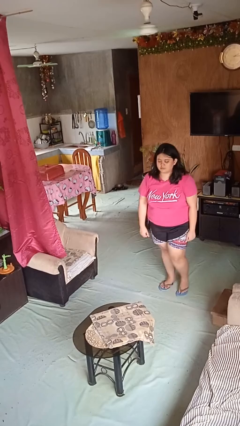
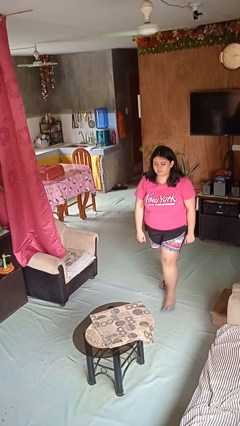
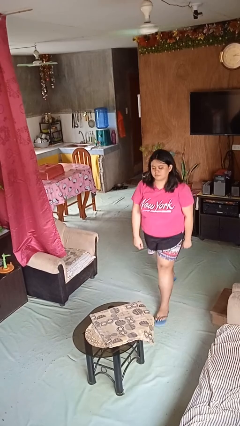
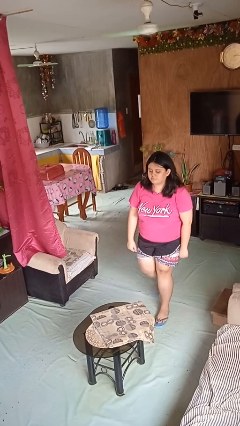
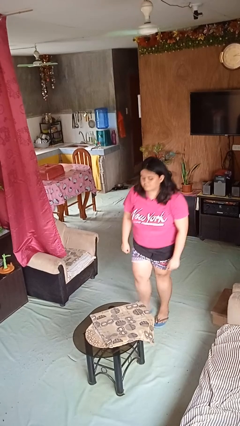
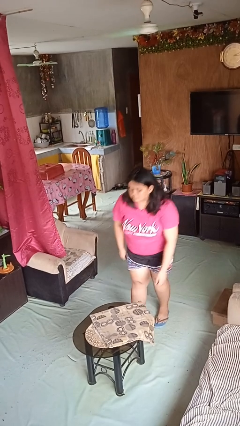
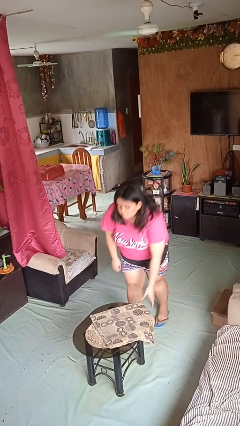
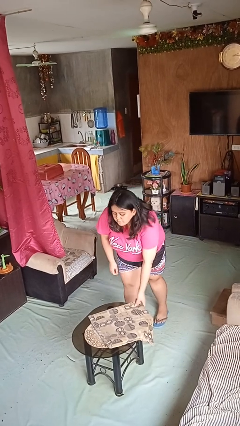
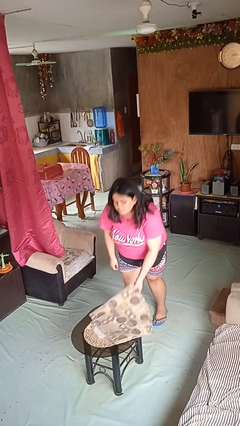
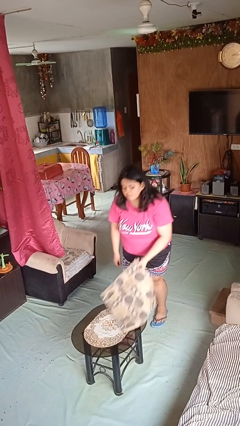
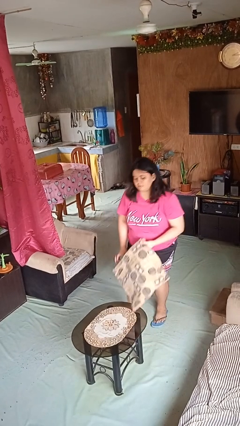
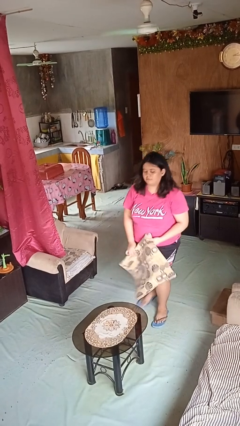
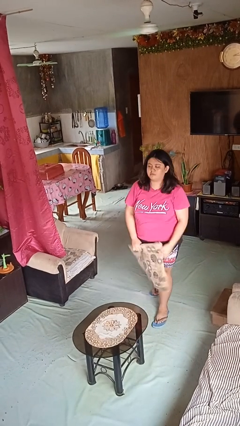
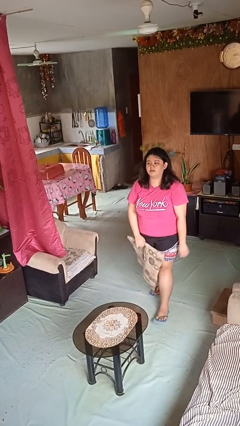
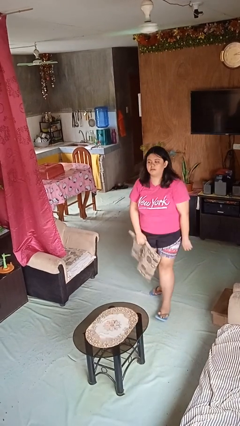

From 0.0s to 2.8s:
person picks up object from table

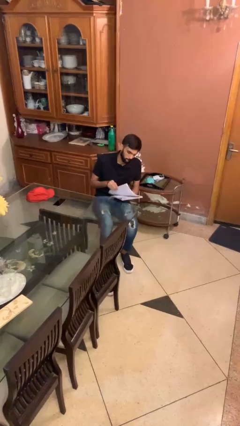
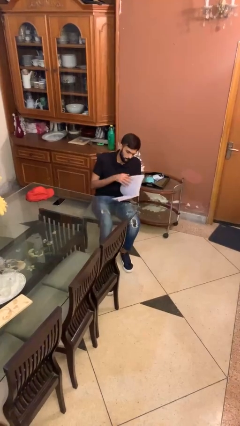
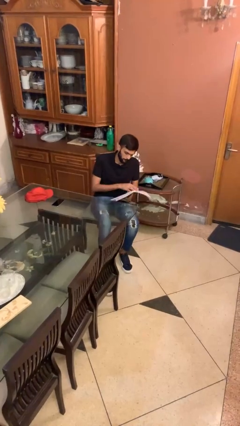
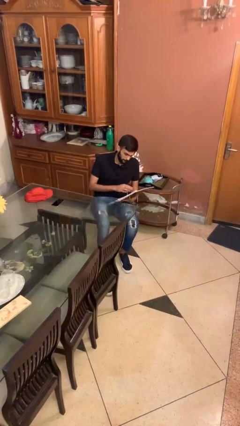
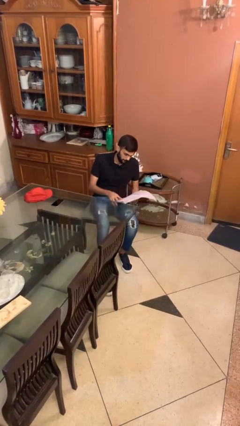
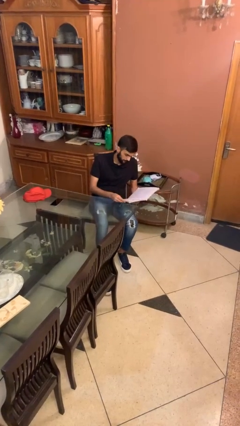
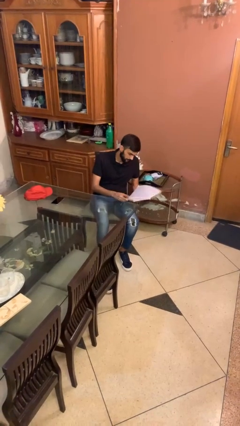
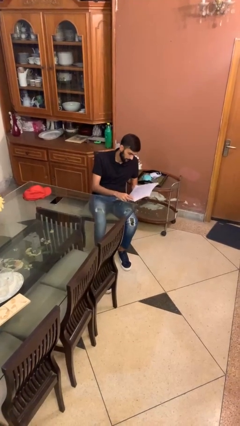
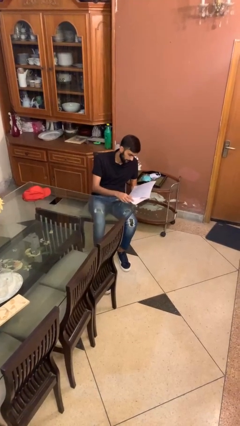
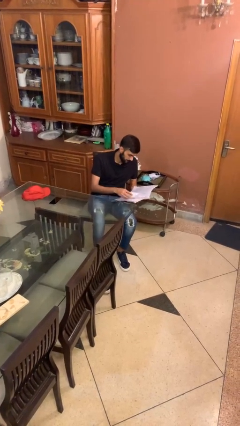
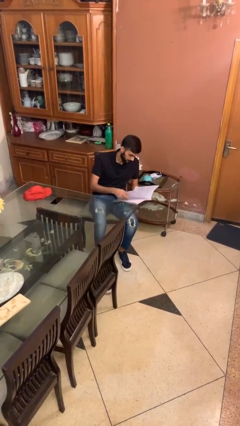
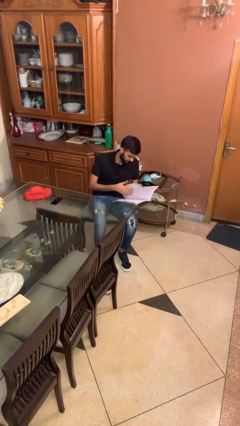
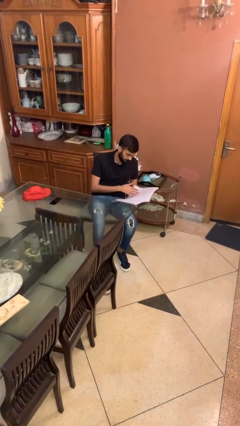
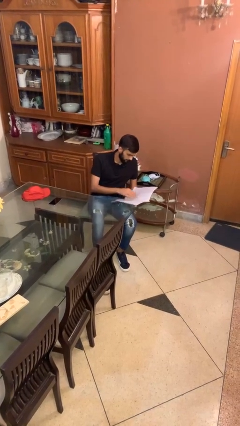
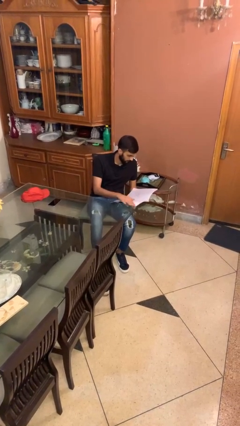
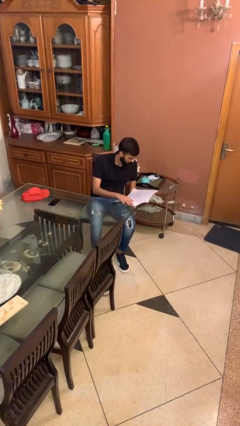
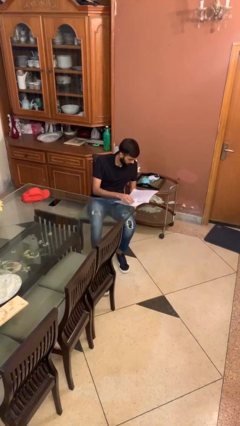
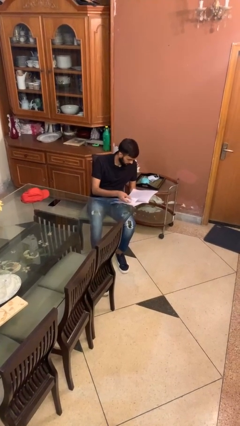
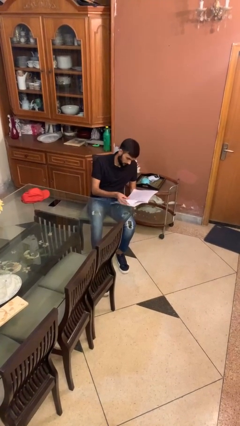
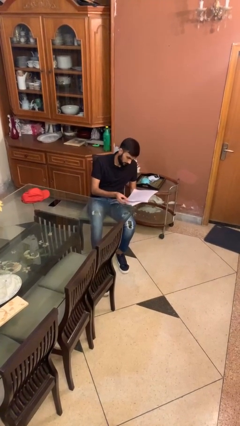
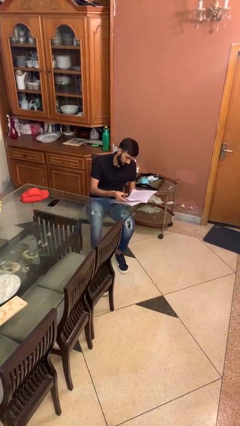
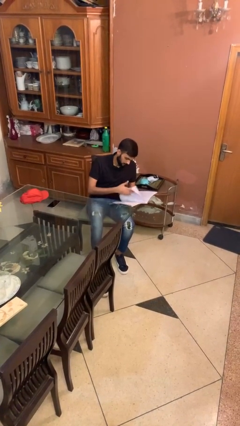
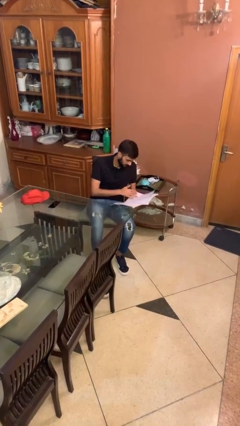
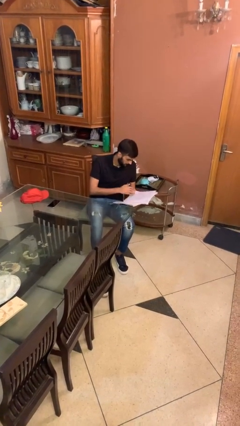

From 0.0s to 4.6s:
person reads document

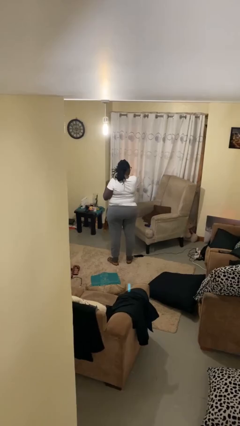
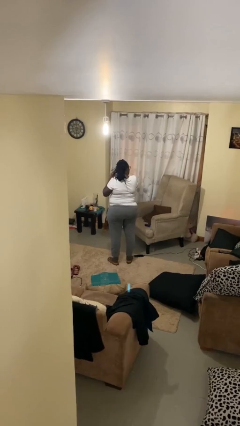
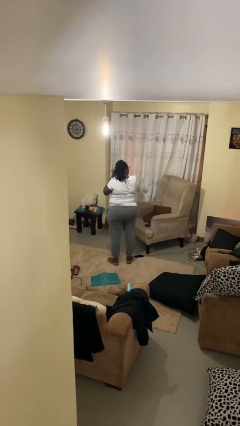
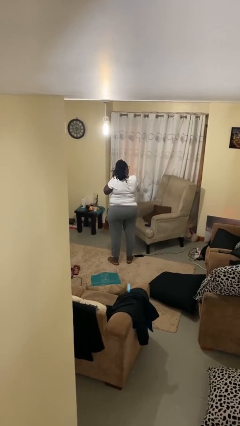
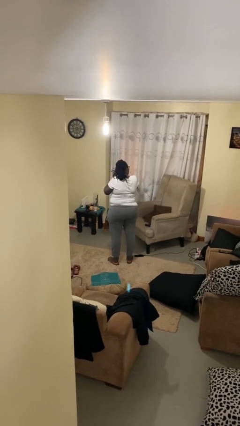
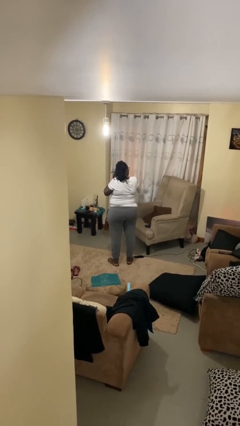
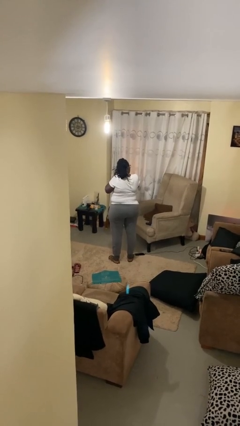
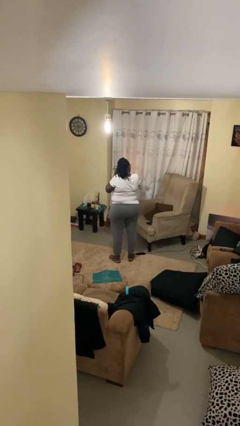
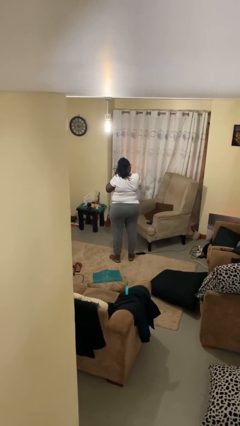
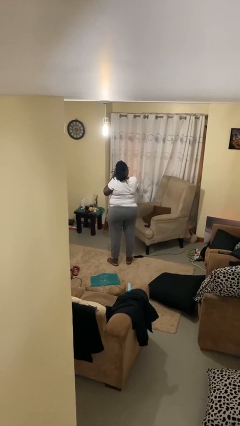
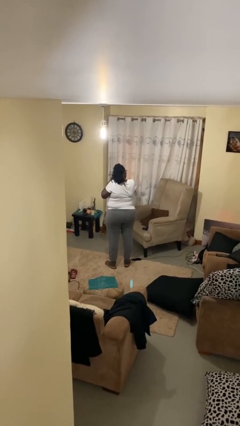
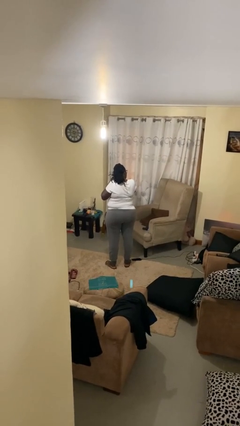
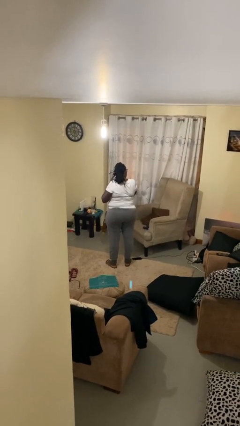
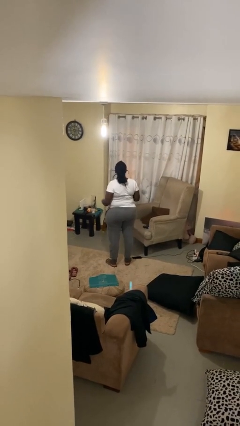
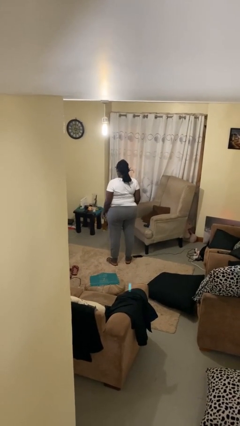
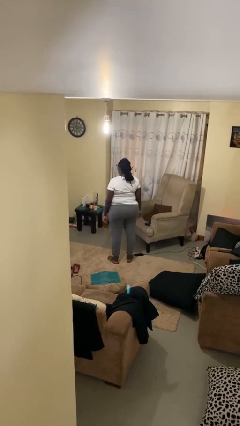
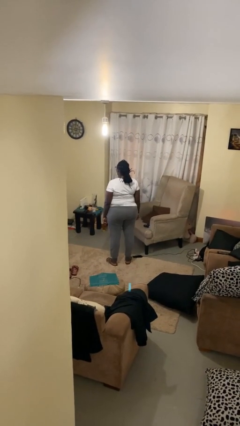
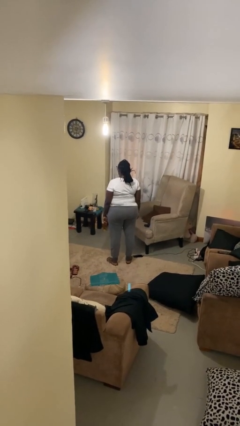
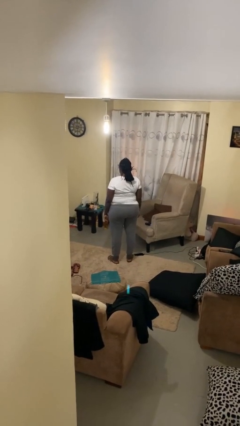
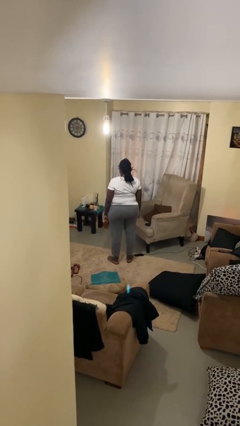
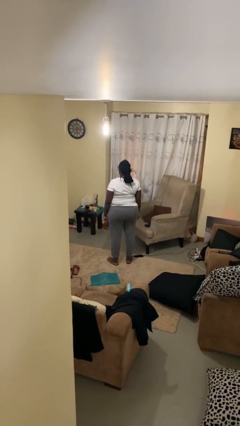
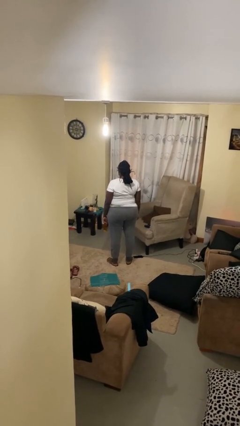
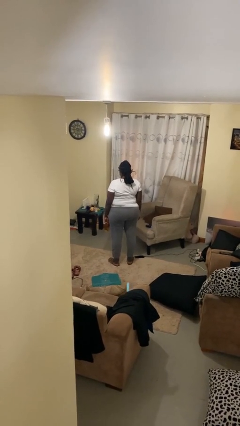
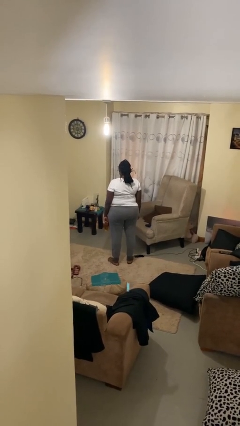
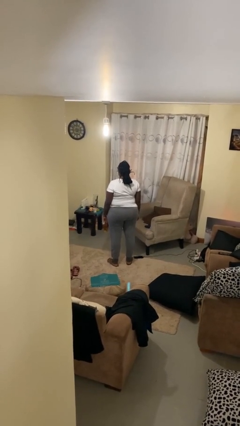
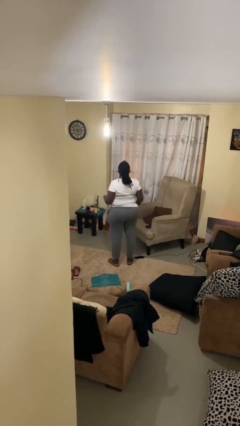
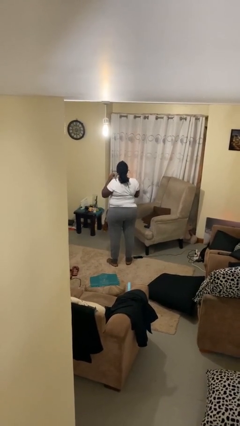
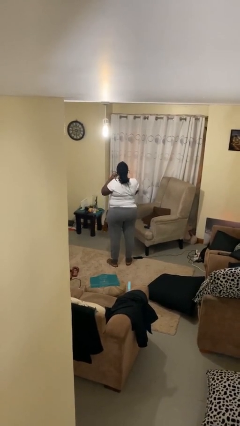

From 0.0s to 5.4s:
person puts on earrings

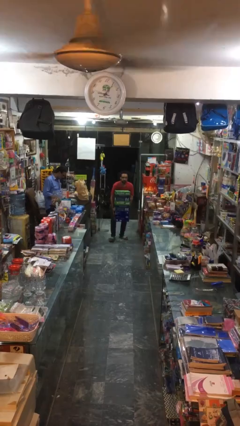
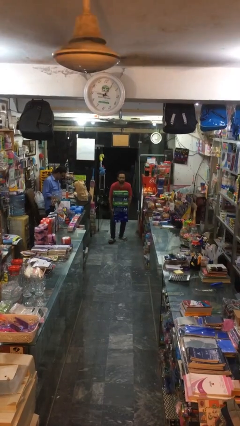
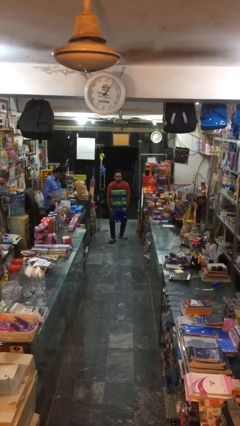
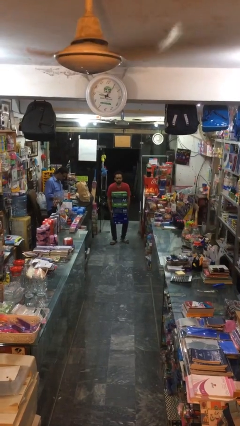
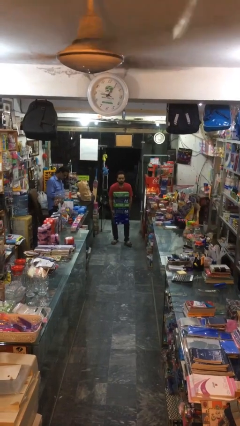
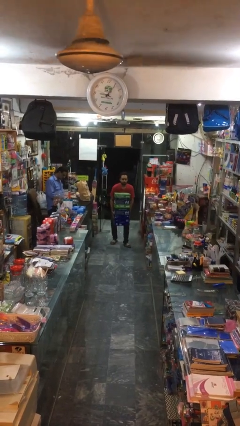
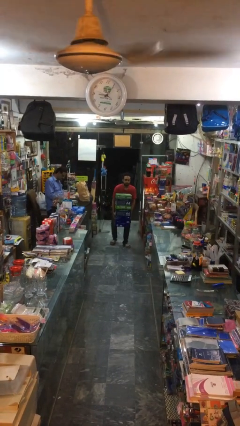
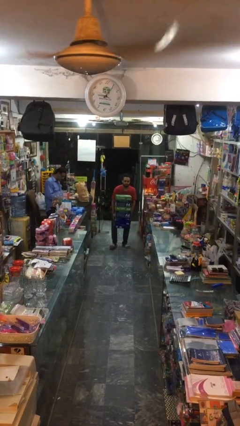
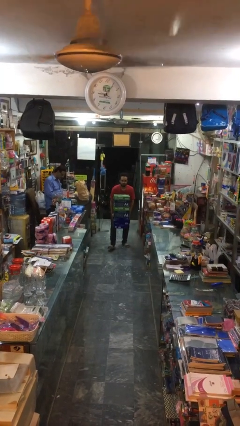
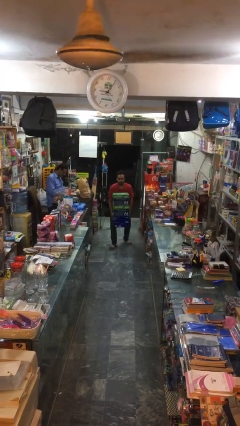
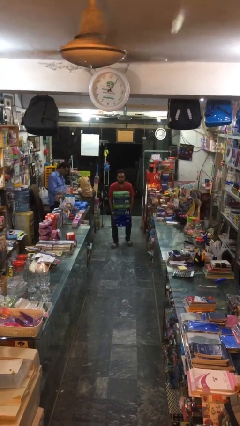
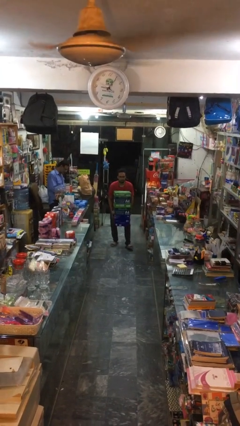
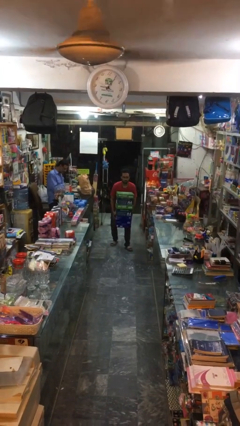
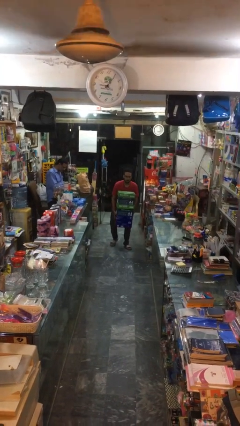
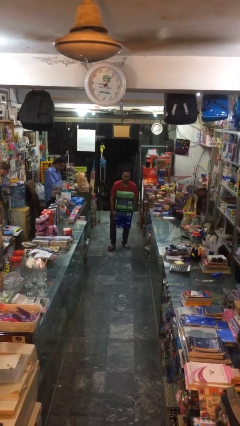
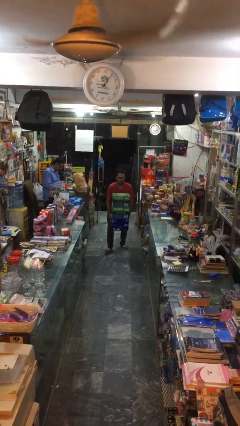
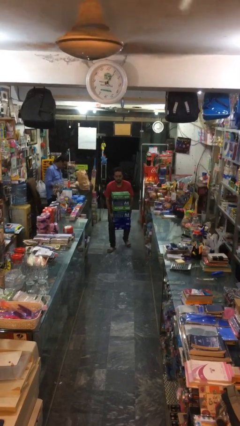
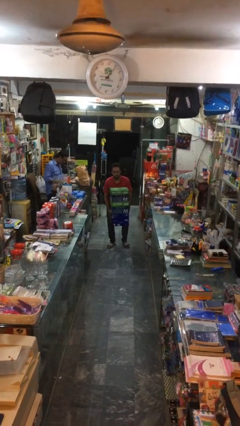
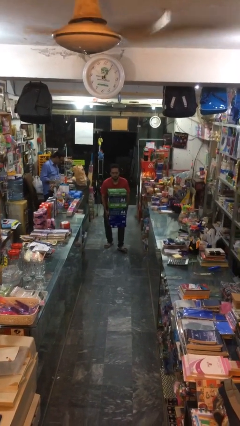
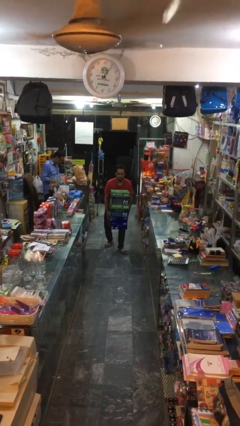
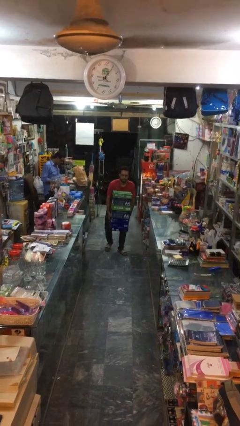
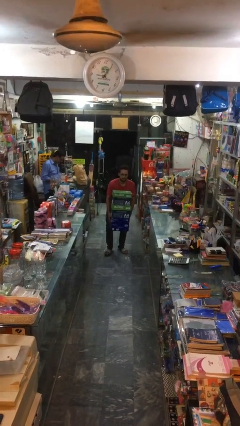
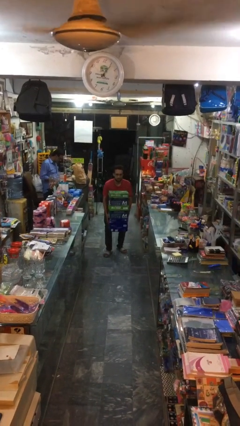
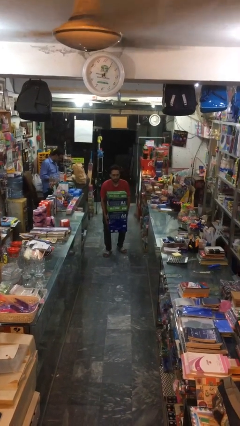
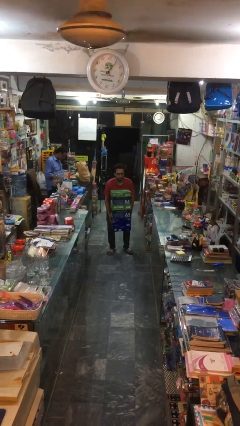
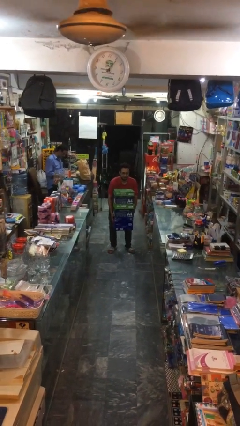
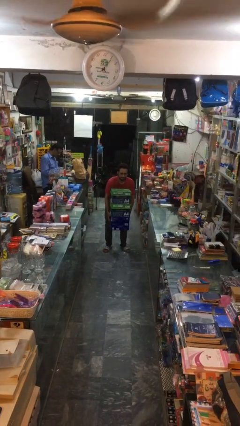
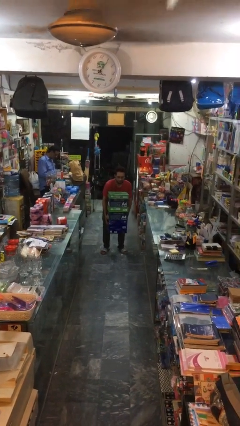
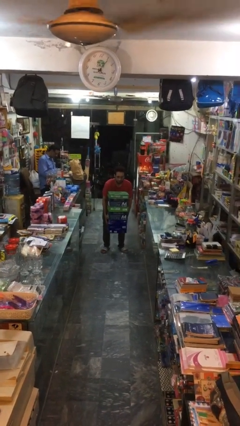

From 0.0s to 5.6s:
person carries heavy object
